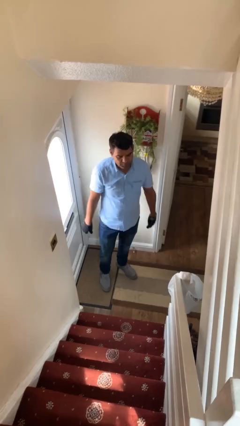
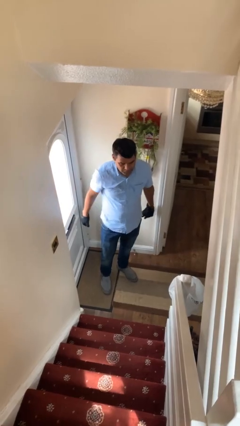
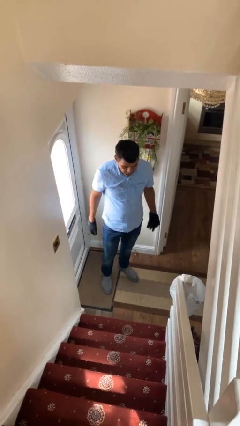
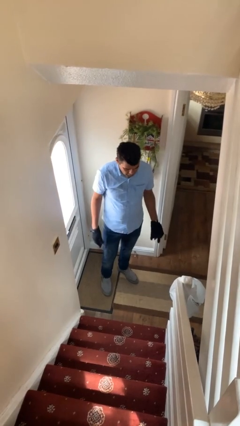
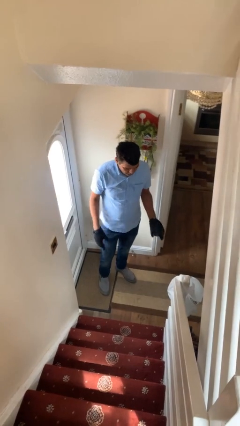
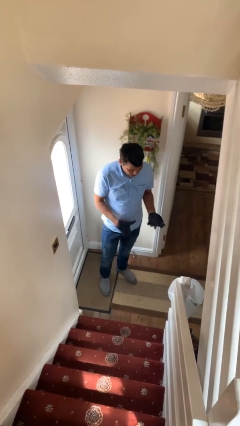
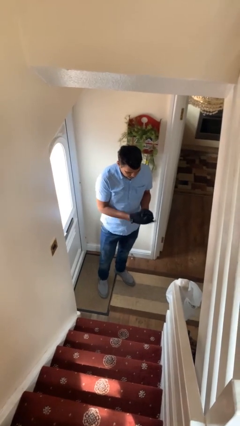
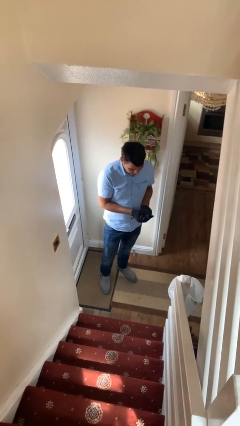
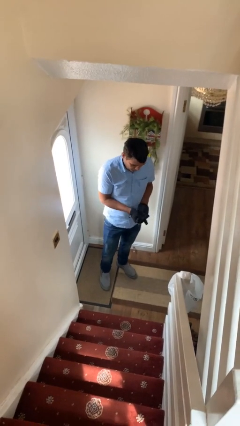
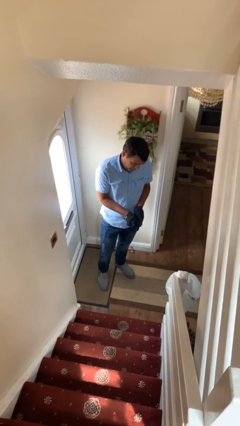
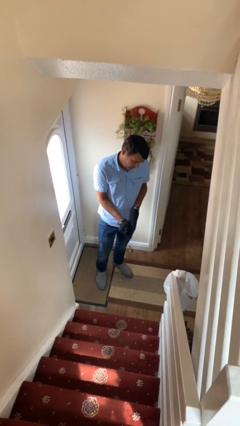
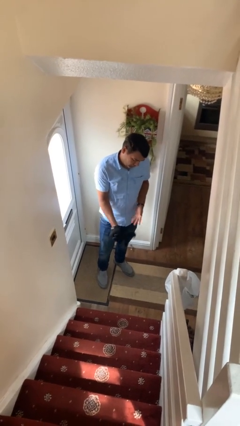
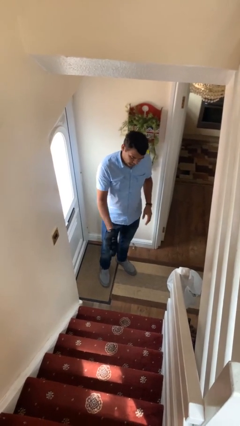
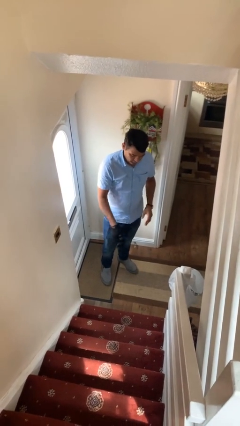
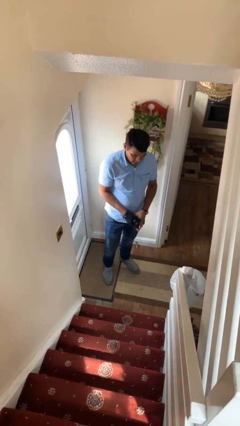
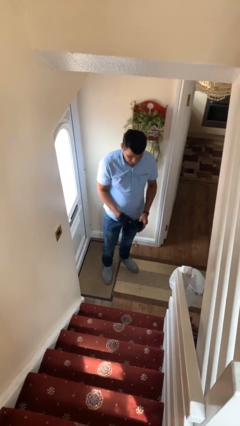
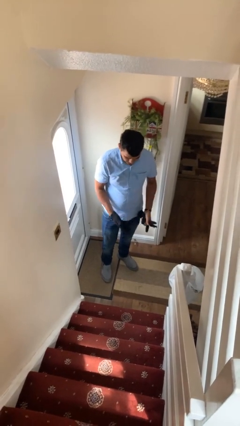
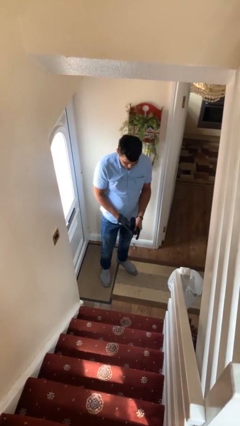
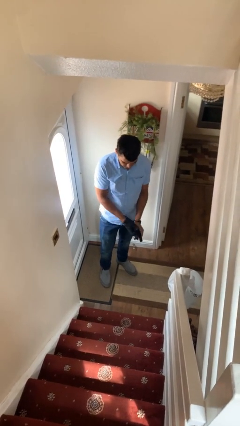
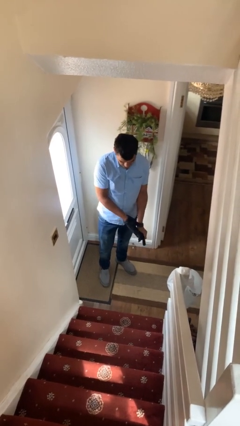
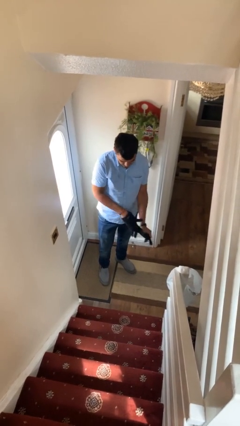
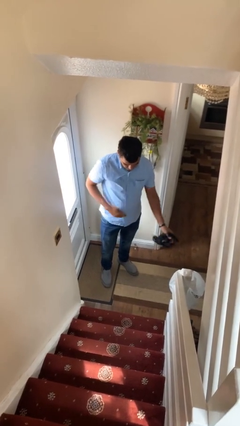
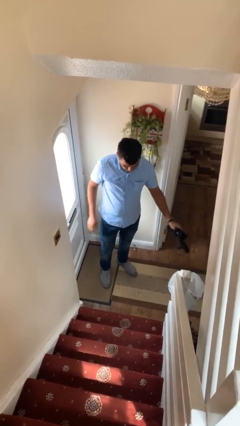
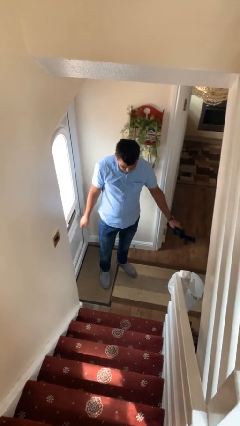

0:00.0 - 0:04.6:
person takes off gloves

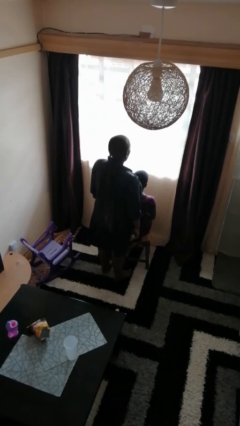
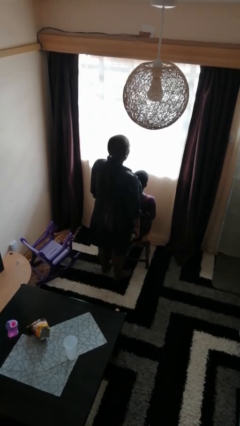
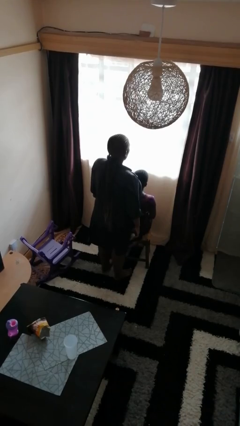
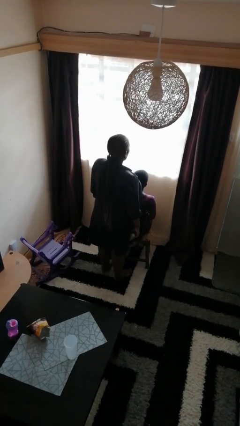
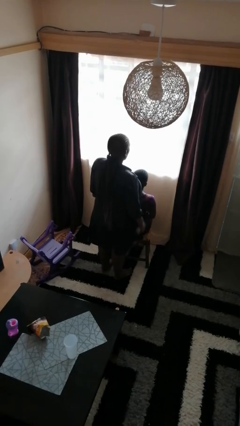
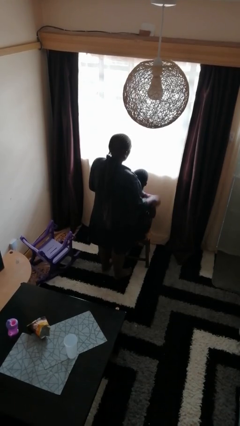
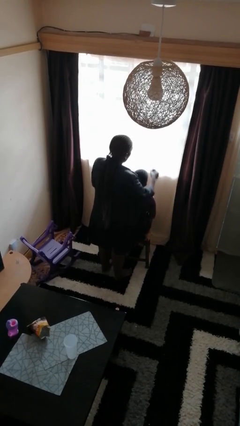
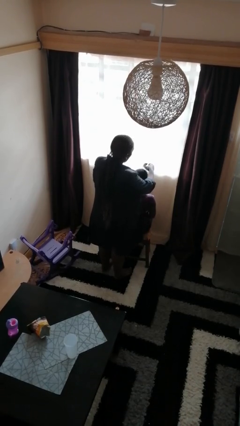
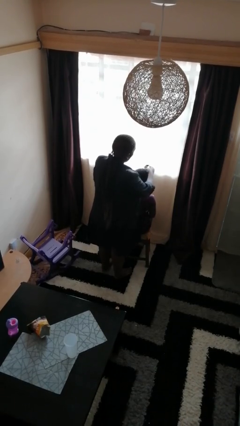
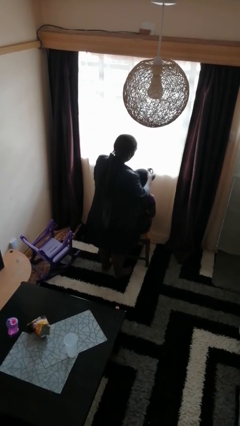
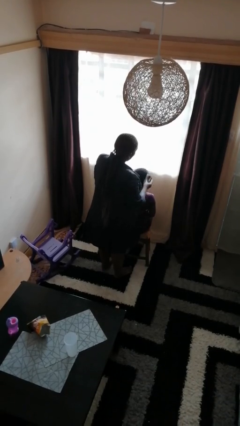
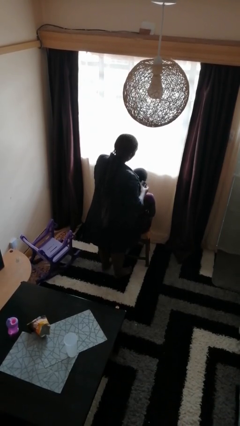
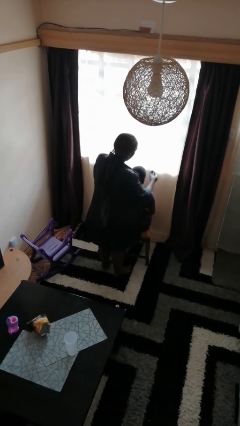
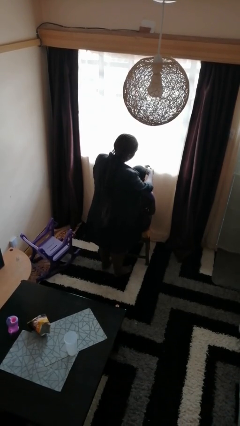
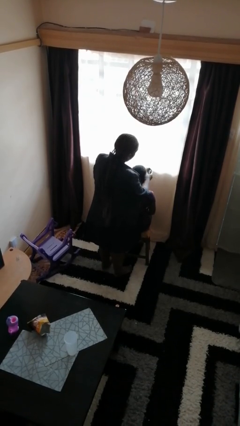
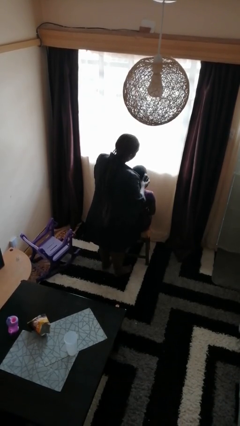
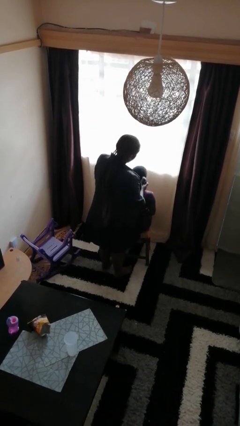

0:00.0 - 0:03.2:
person brushes hair of person

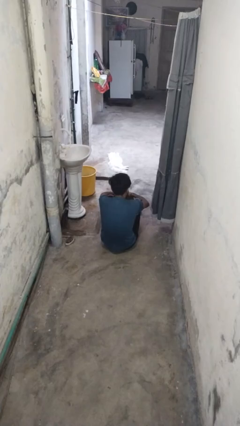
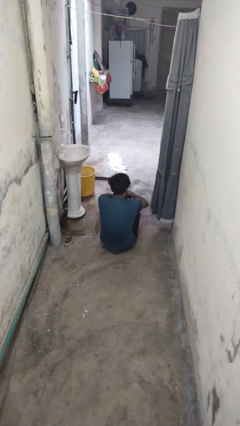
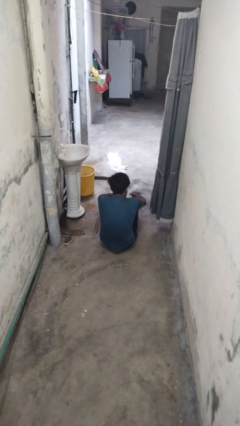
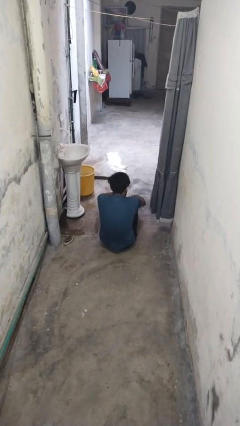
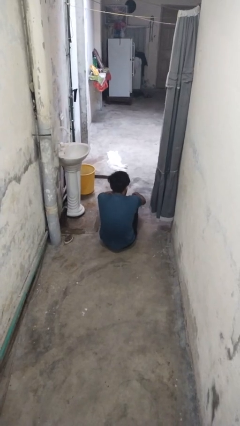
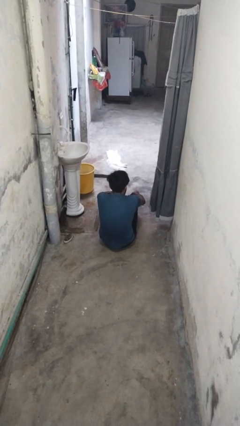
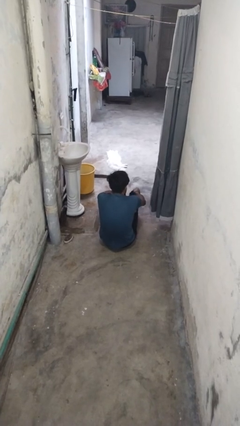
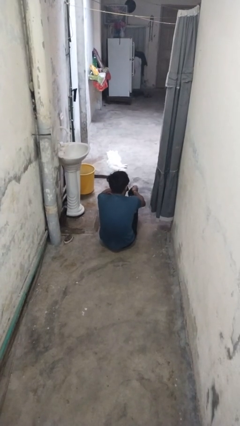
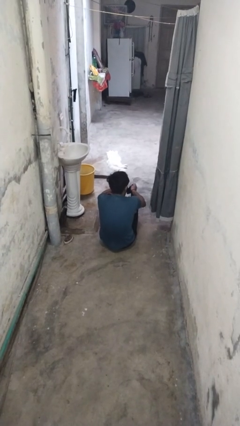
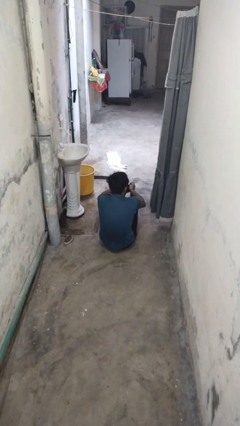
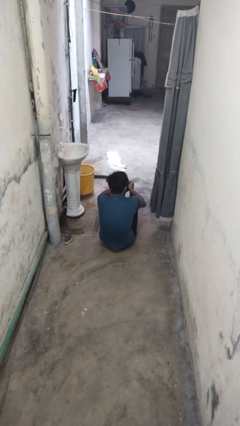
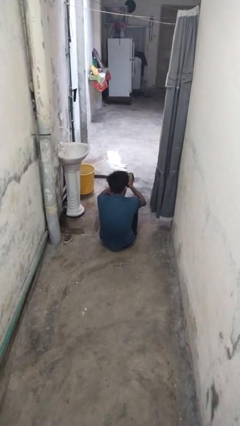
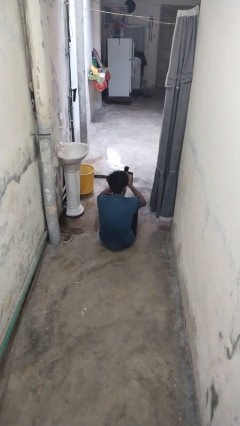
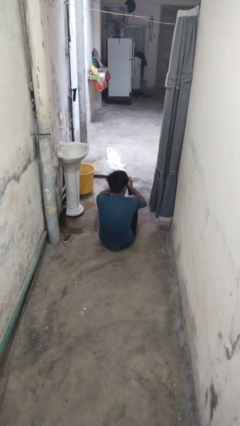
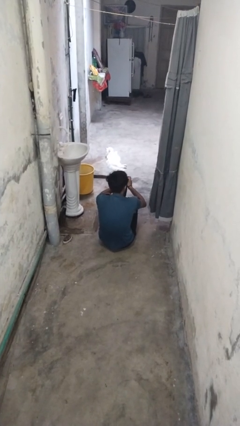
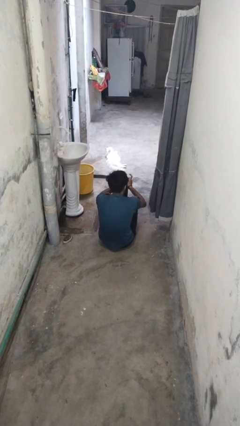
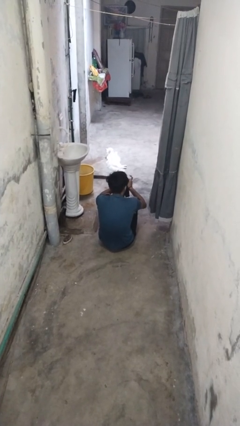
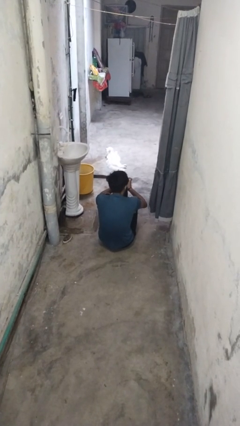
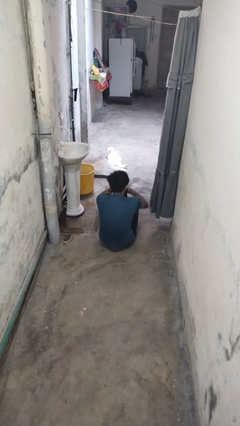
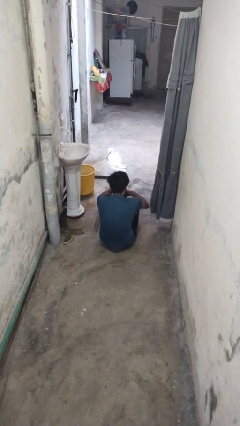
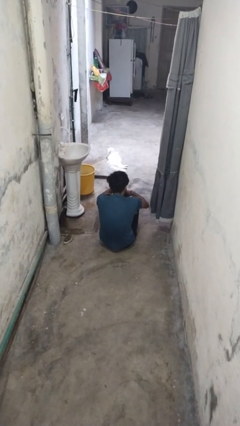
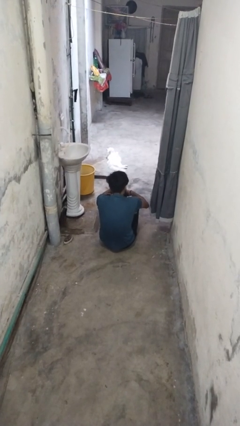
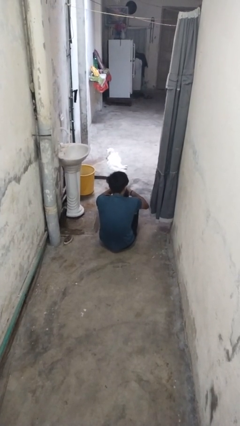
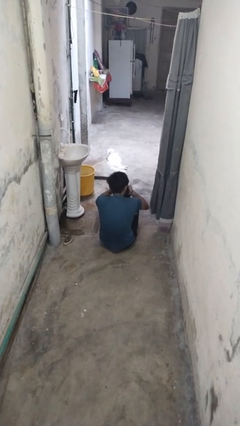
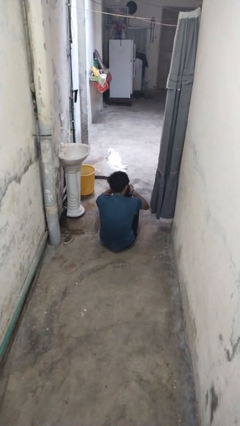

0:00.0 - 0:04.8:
person takes off socks

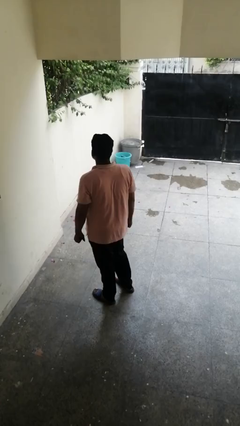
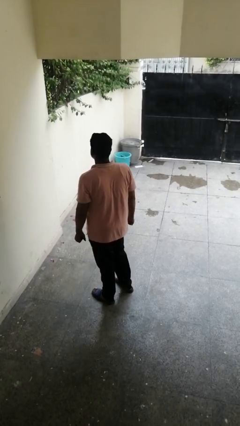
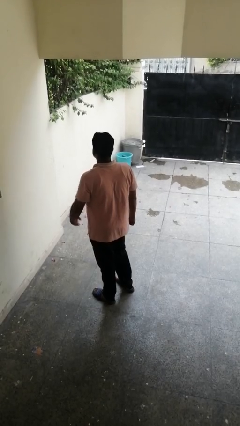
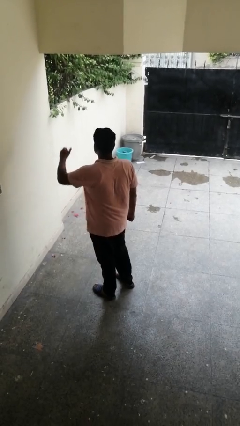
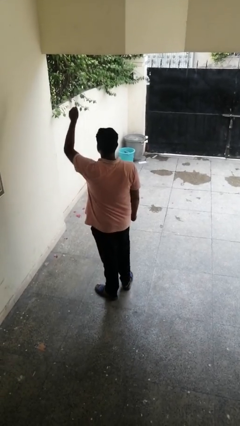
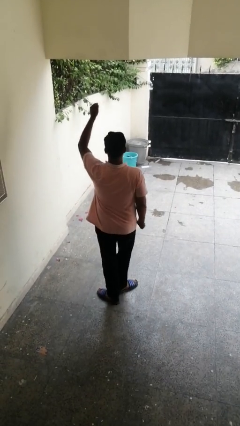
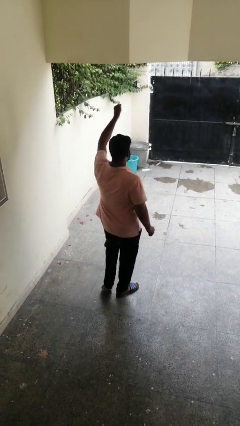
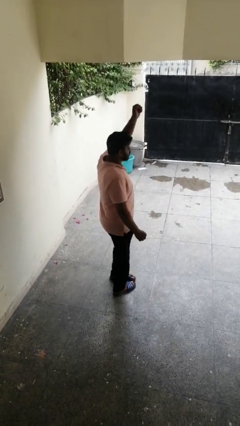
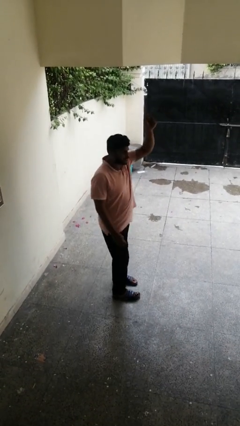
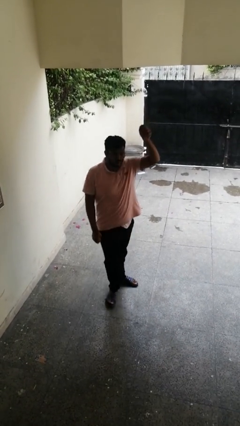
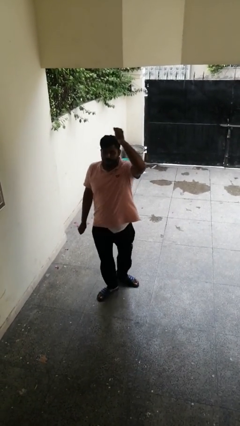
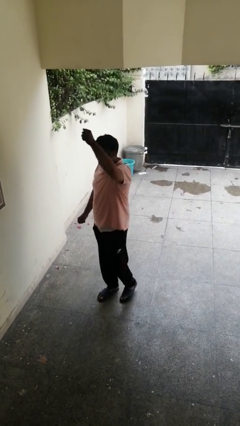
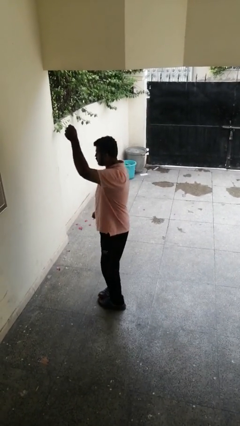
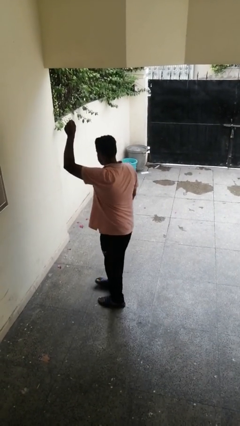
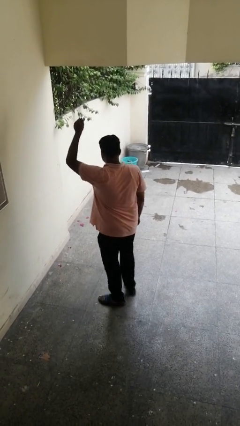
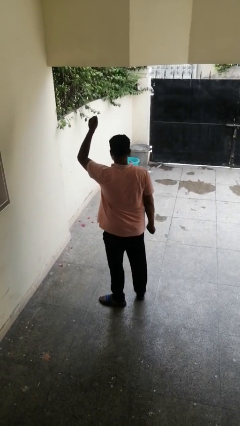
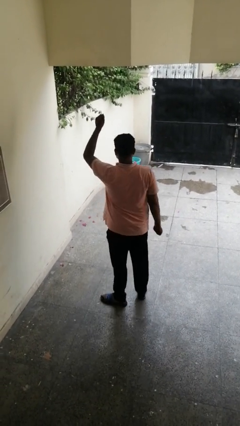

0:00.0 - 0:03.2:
person twirls

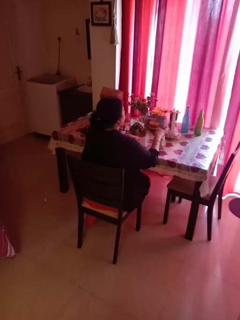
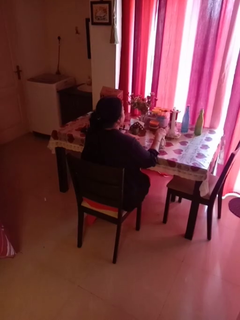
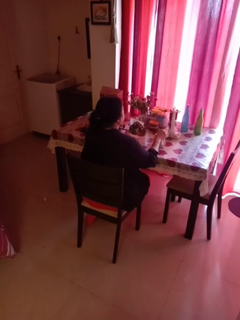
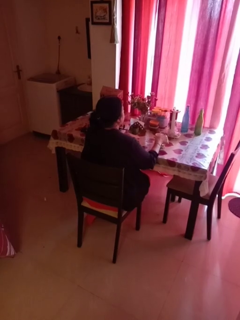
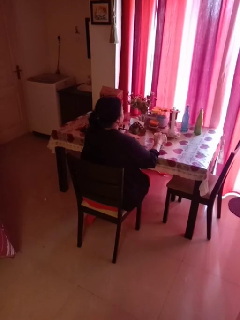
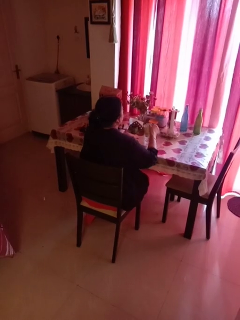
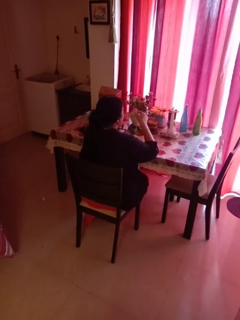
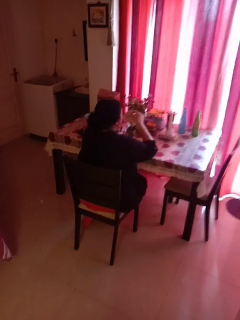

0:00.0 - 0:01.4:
person stirs mug

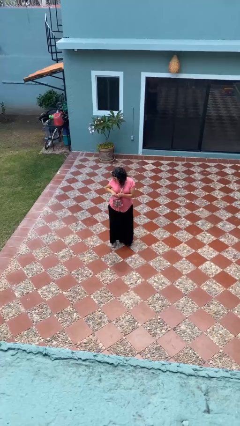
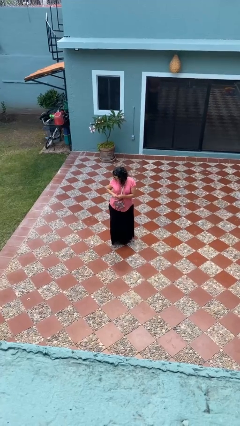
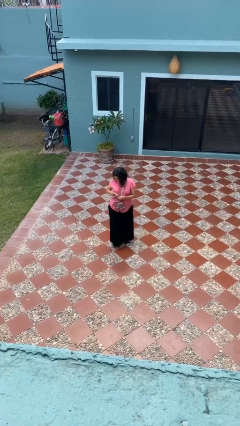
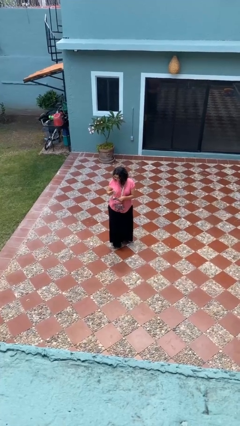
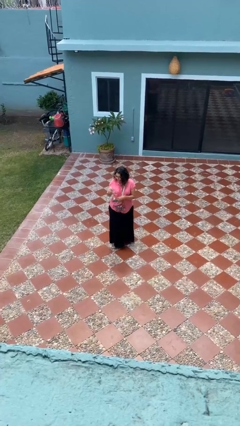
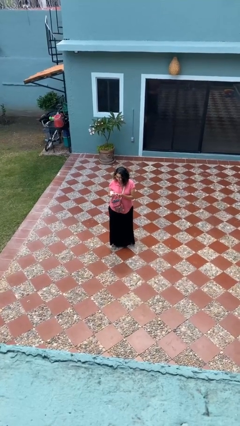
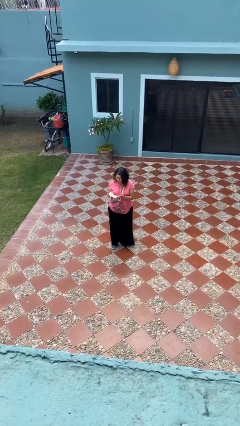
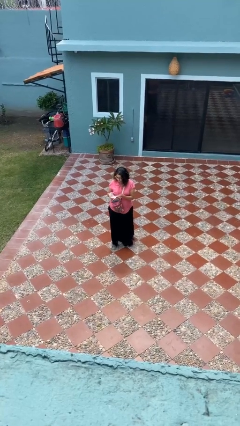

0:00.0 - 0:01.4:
person takes object from purse
